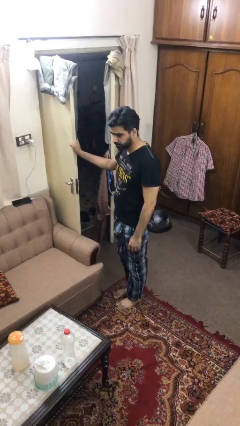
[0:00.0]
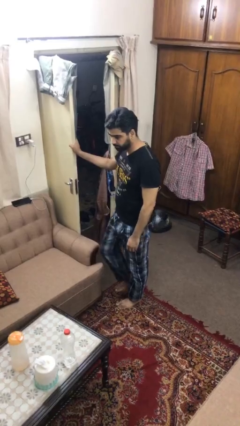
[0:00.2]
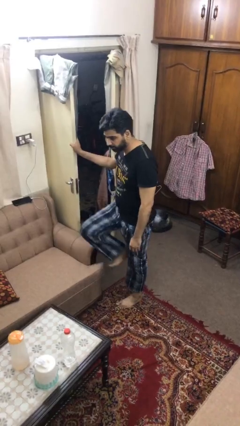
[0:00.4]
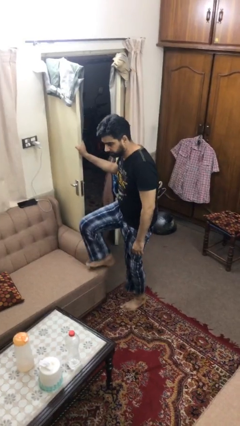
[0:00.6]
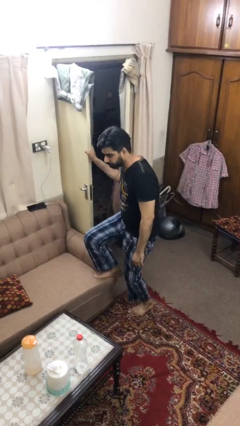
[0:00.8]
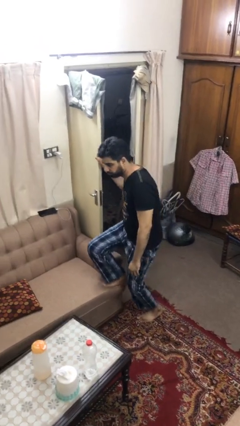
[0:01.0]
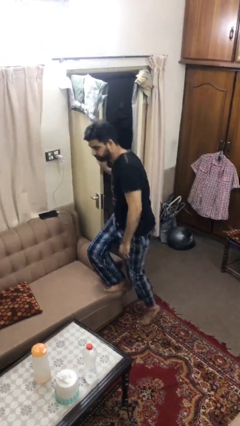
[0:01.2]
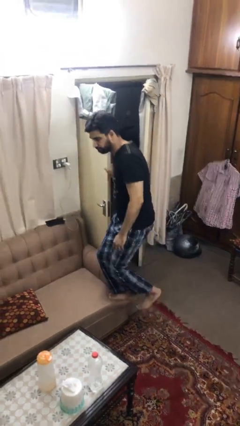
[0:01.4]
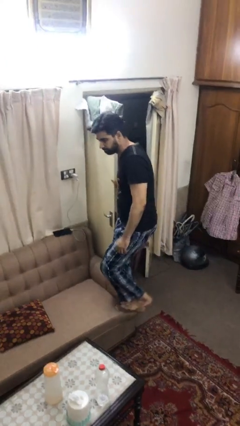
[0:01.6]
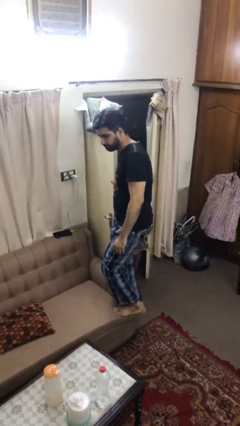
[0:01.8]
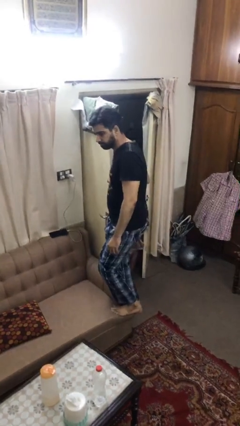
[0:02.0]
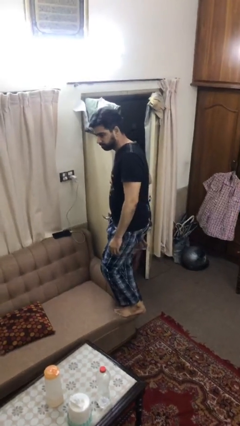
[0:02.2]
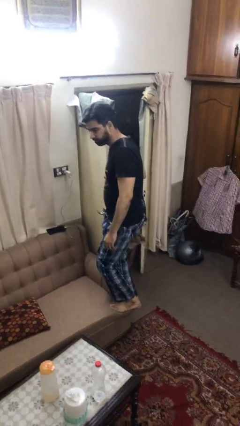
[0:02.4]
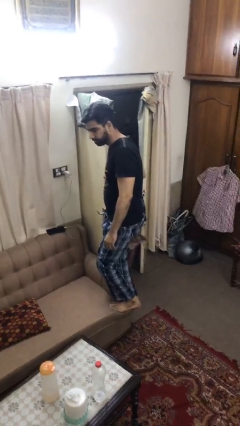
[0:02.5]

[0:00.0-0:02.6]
person climbs on couch

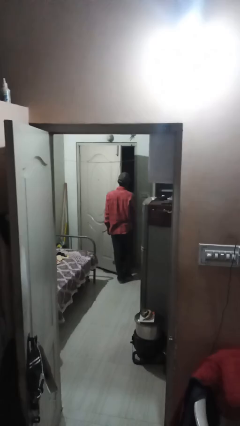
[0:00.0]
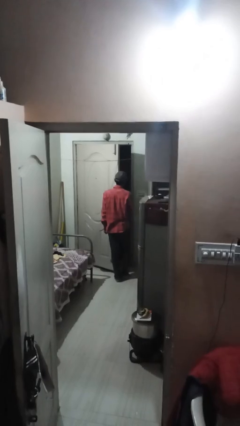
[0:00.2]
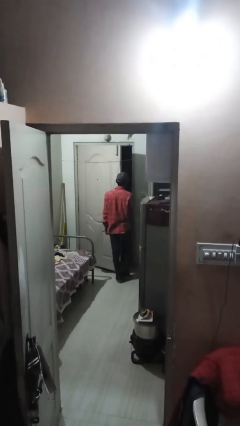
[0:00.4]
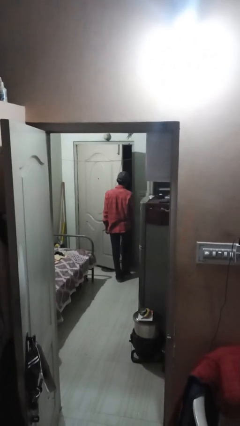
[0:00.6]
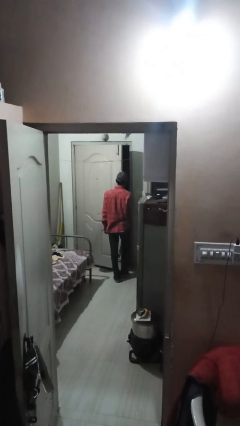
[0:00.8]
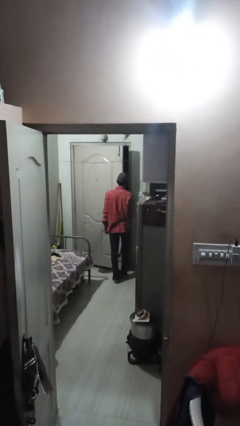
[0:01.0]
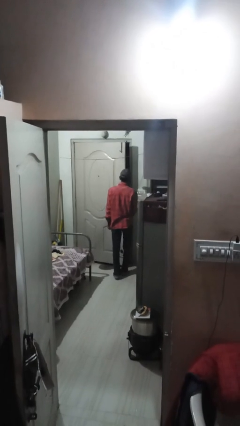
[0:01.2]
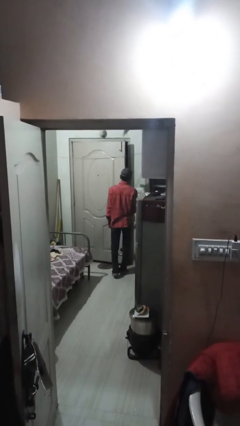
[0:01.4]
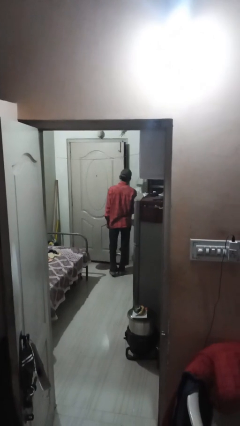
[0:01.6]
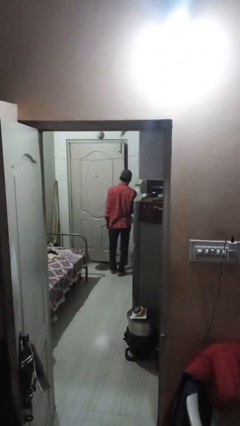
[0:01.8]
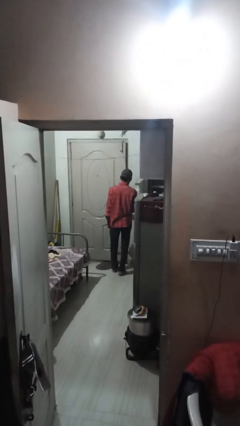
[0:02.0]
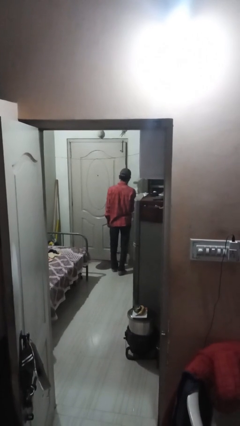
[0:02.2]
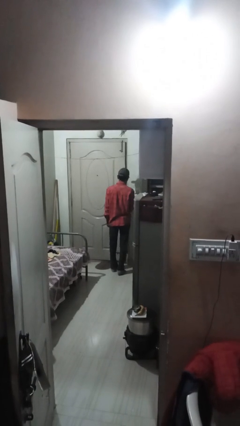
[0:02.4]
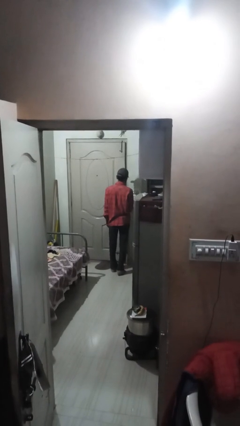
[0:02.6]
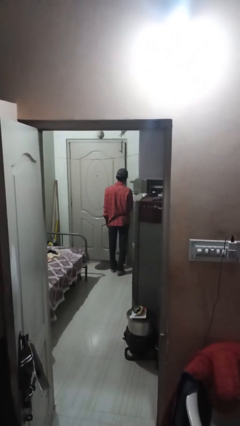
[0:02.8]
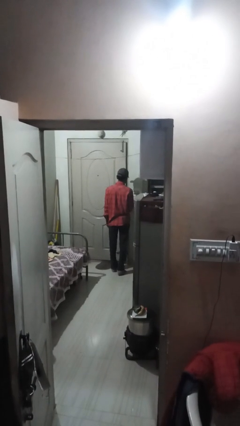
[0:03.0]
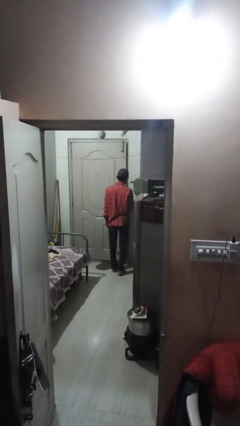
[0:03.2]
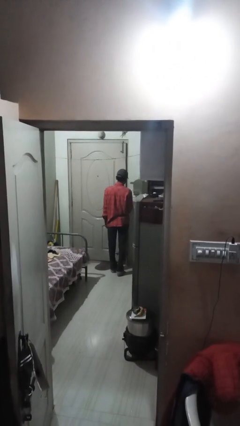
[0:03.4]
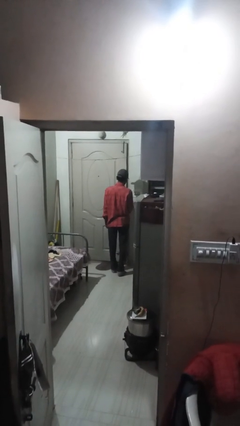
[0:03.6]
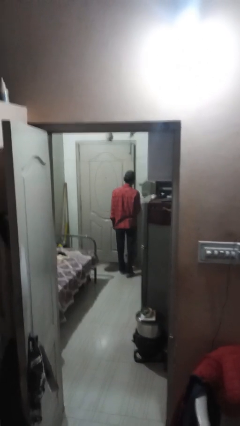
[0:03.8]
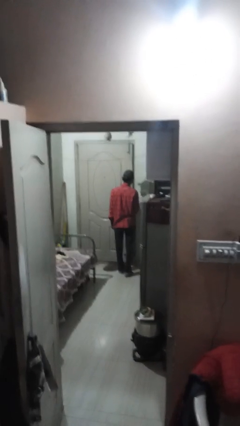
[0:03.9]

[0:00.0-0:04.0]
person closes facility door

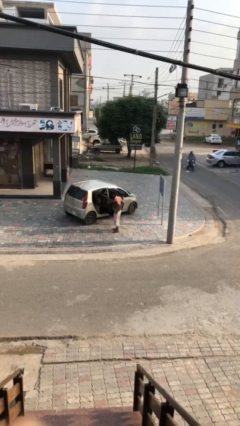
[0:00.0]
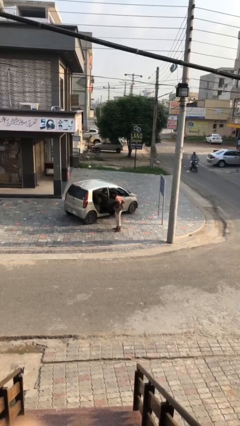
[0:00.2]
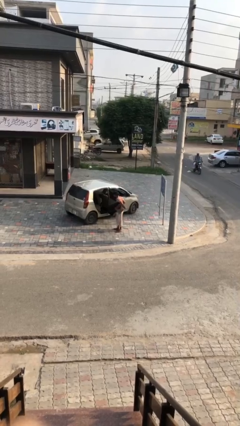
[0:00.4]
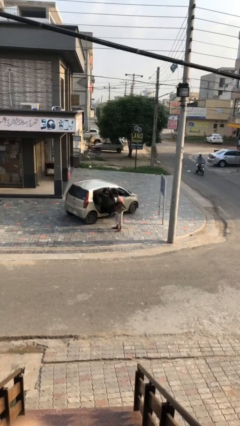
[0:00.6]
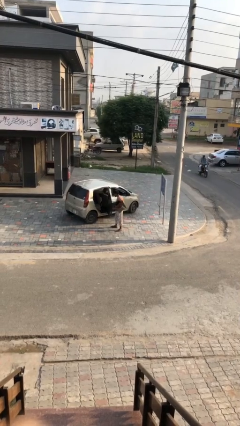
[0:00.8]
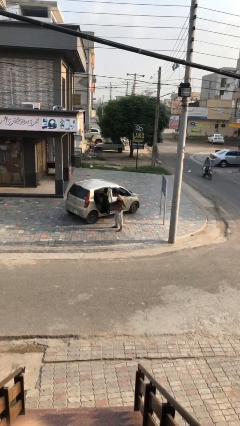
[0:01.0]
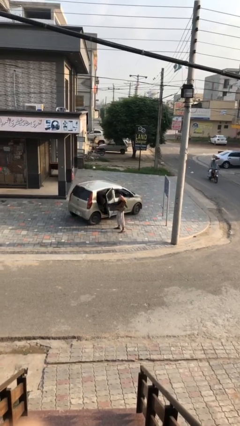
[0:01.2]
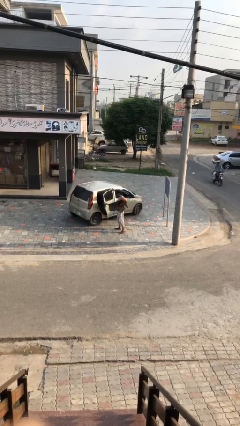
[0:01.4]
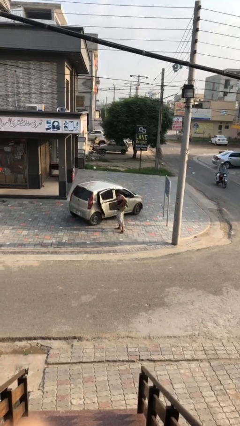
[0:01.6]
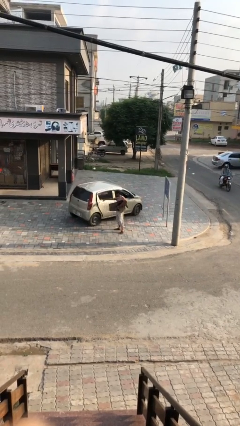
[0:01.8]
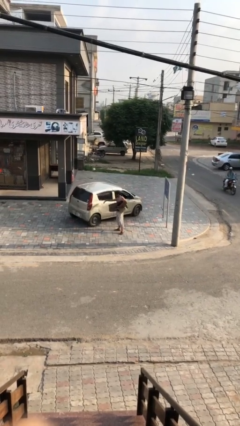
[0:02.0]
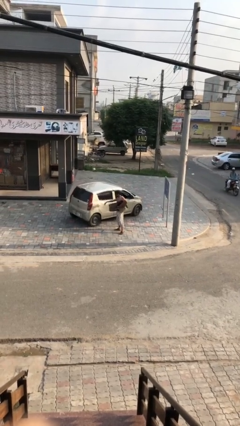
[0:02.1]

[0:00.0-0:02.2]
person closes car door

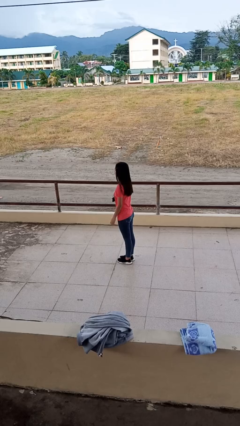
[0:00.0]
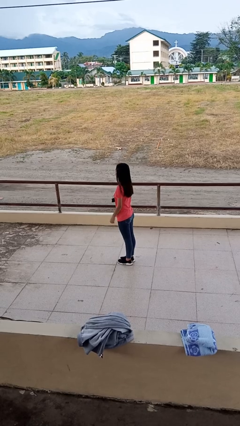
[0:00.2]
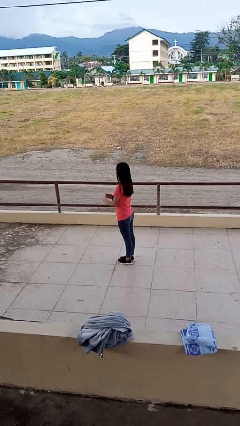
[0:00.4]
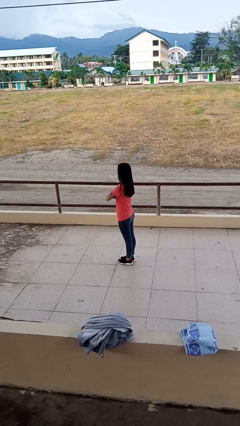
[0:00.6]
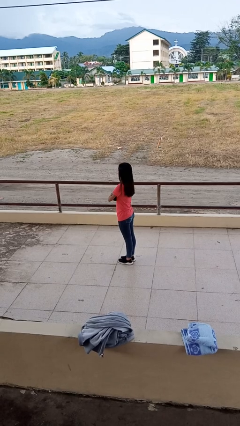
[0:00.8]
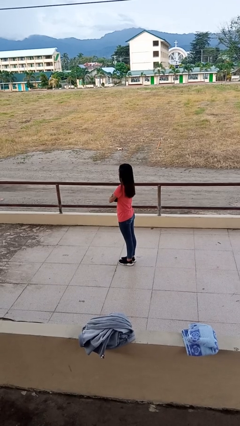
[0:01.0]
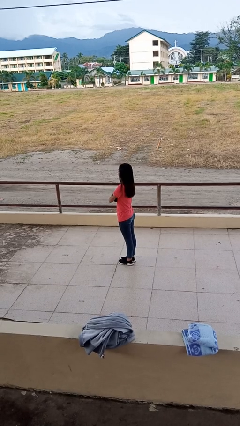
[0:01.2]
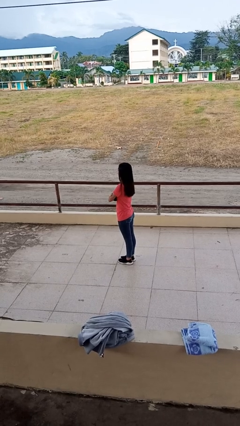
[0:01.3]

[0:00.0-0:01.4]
person crosses arms

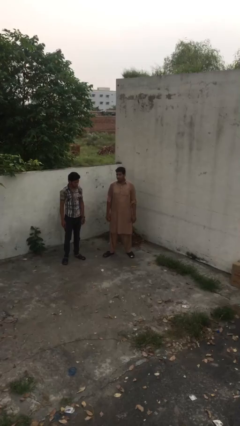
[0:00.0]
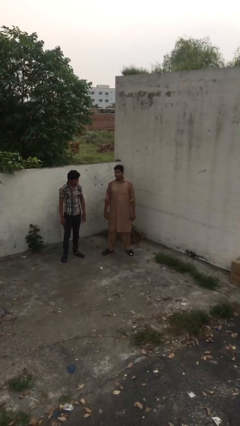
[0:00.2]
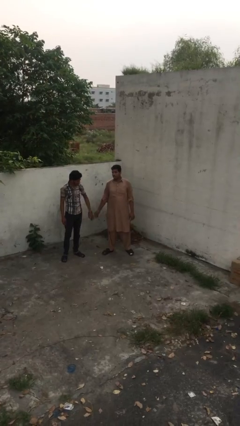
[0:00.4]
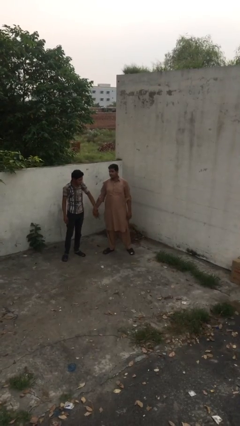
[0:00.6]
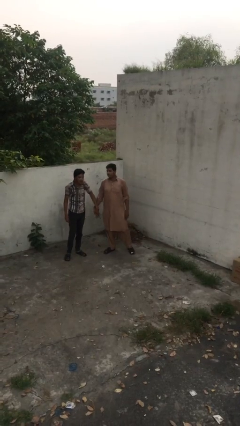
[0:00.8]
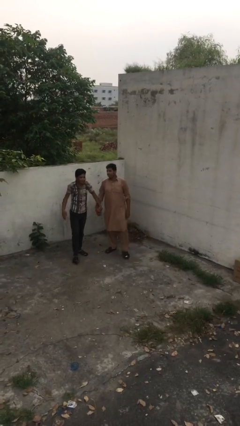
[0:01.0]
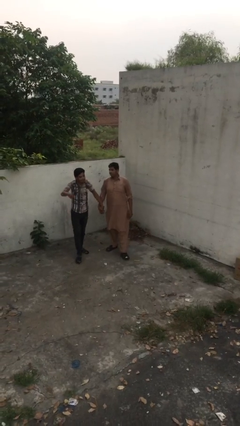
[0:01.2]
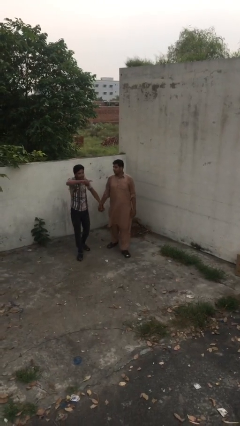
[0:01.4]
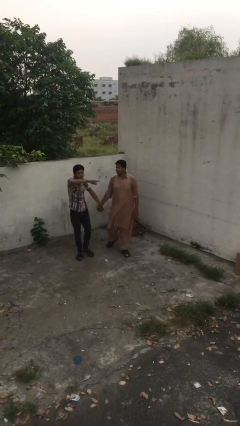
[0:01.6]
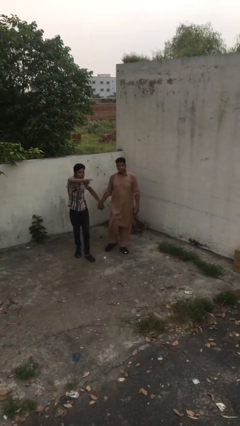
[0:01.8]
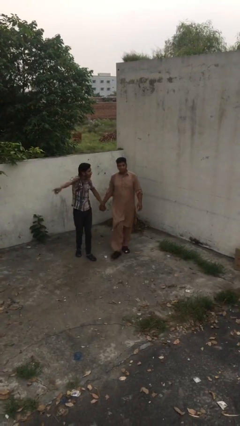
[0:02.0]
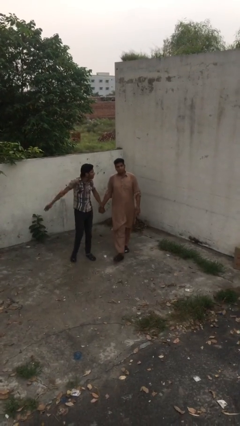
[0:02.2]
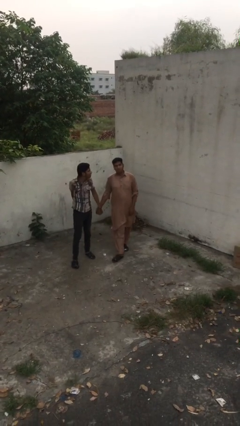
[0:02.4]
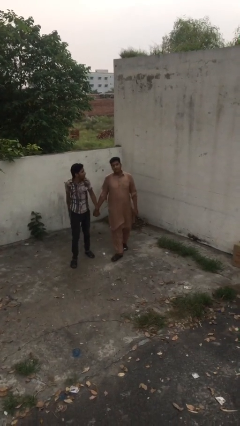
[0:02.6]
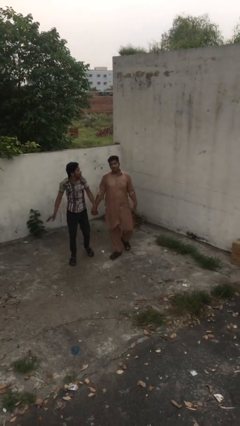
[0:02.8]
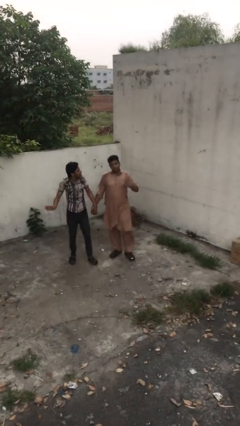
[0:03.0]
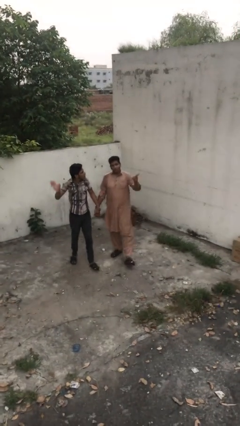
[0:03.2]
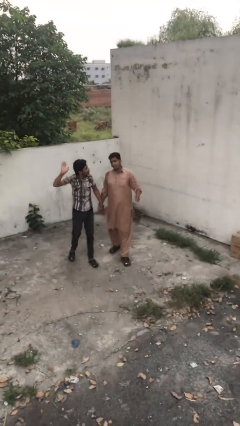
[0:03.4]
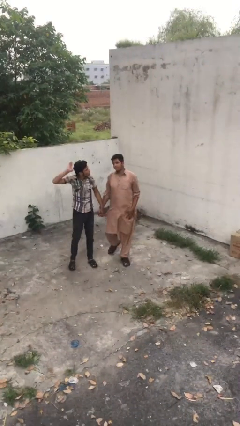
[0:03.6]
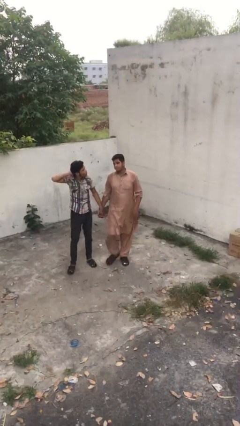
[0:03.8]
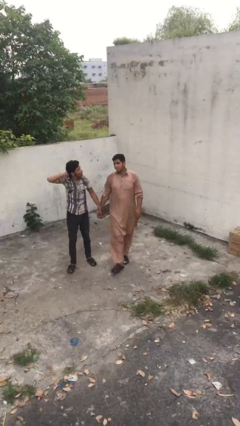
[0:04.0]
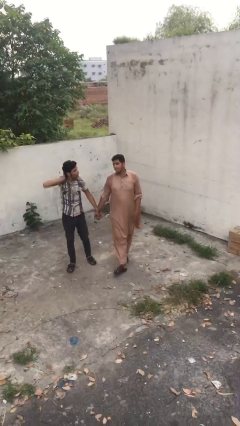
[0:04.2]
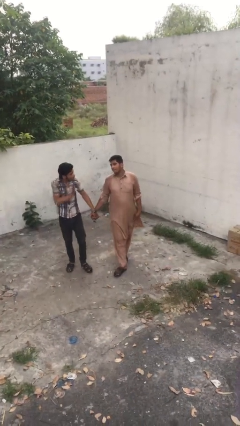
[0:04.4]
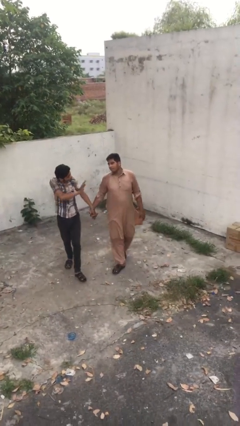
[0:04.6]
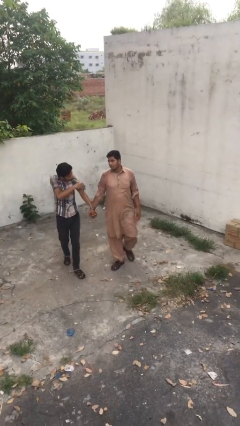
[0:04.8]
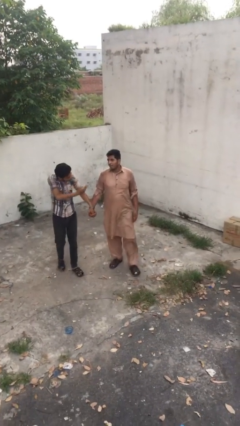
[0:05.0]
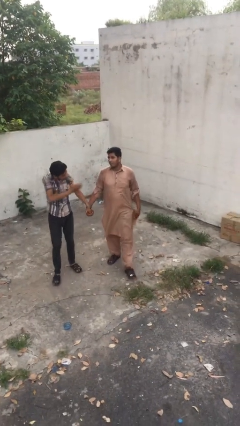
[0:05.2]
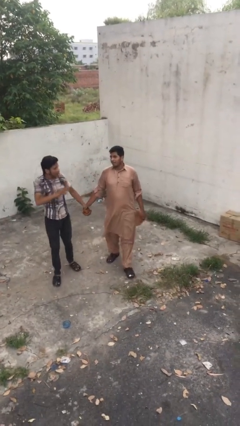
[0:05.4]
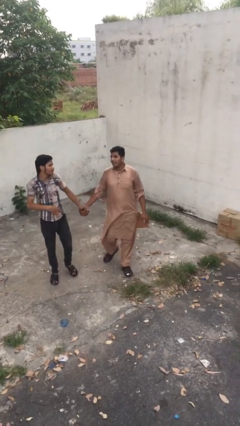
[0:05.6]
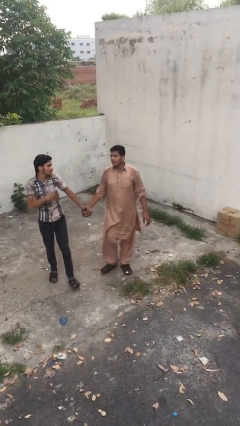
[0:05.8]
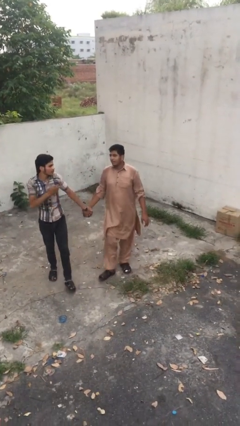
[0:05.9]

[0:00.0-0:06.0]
person holds hand

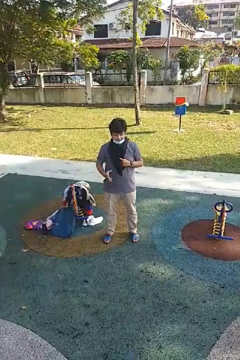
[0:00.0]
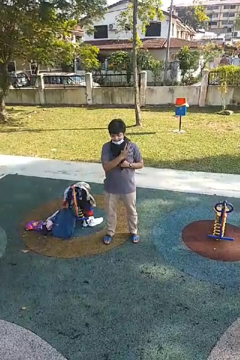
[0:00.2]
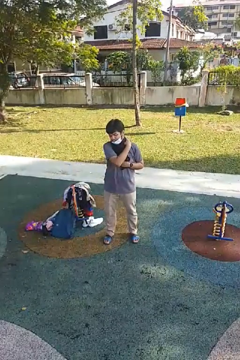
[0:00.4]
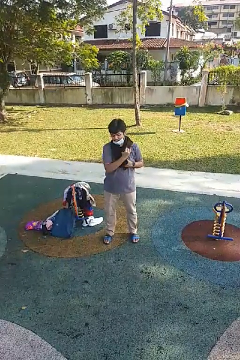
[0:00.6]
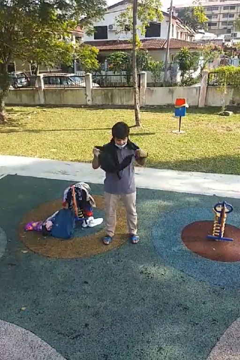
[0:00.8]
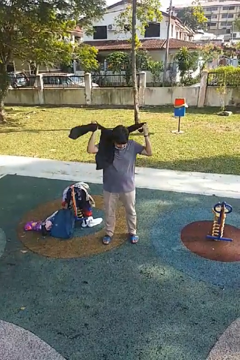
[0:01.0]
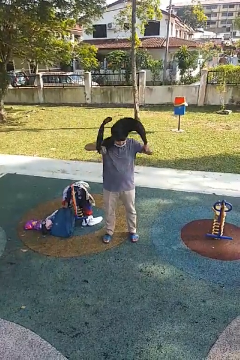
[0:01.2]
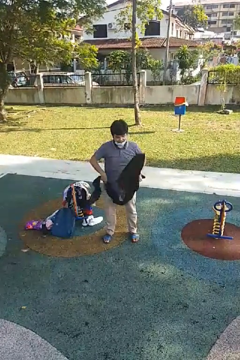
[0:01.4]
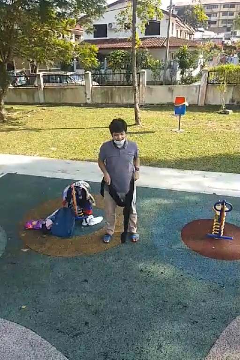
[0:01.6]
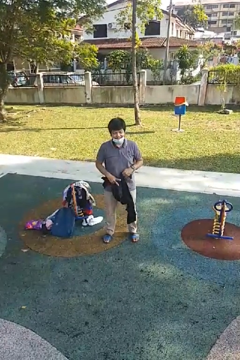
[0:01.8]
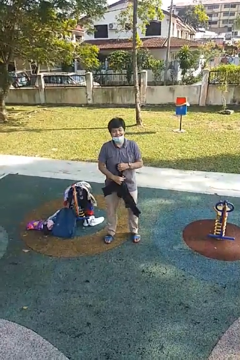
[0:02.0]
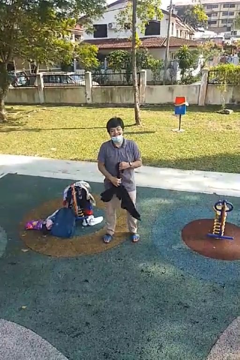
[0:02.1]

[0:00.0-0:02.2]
person takes off scarf
